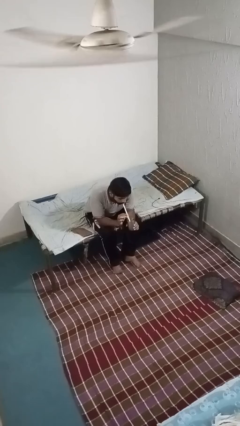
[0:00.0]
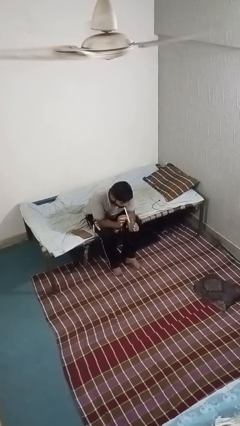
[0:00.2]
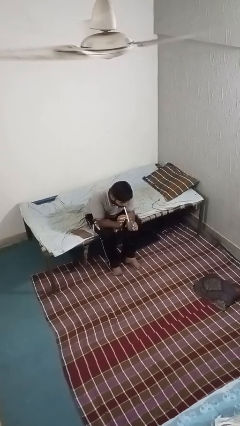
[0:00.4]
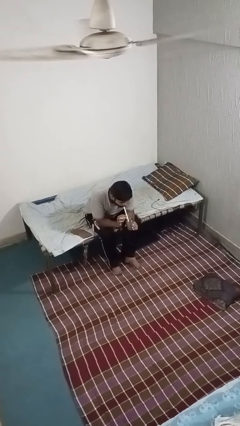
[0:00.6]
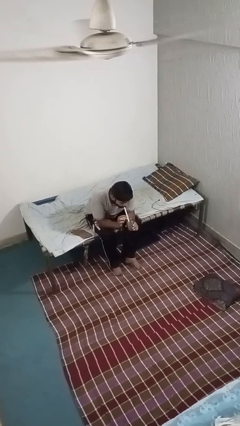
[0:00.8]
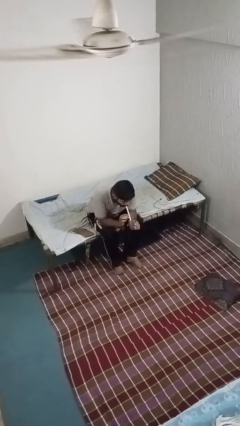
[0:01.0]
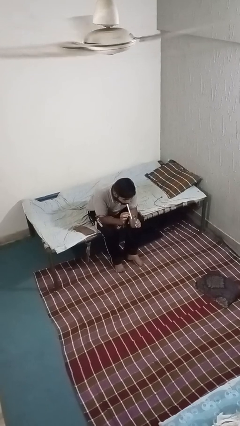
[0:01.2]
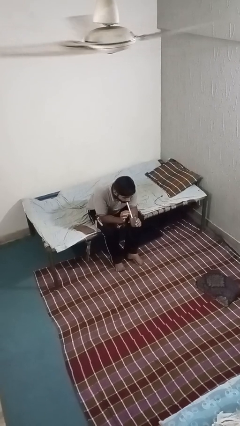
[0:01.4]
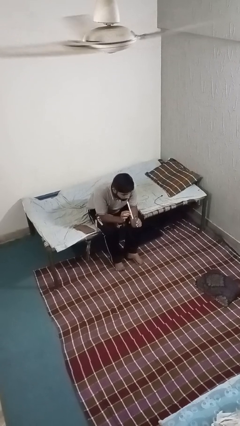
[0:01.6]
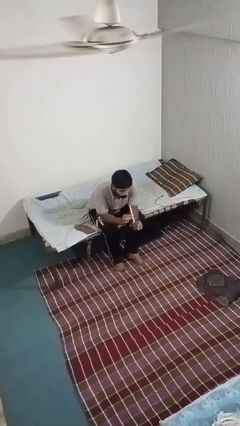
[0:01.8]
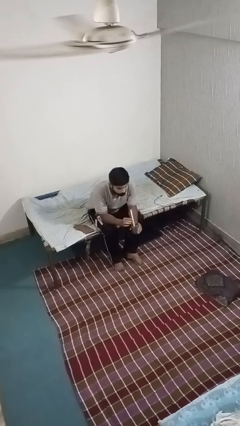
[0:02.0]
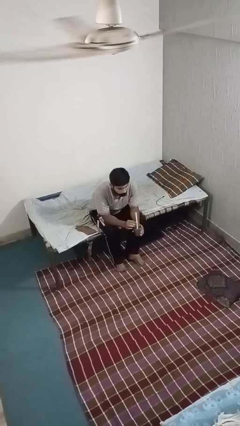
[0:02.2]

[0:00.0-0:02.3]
person drinks from straw

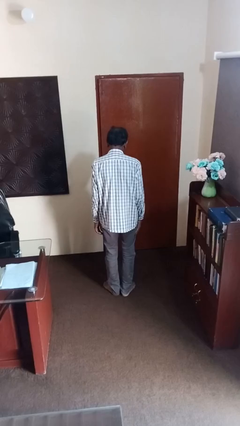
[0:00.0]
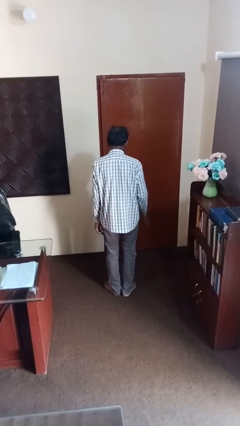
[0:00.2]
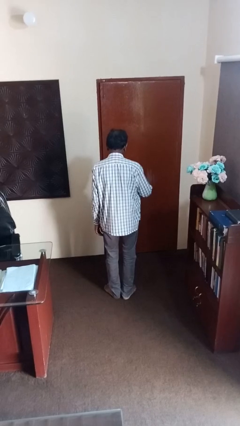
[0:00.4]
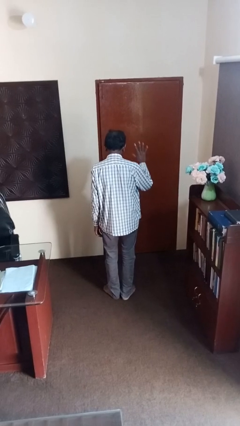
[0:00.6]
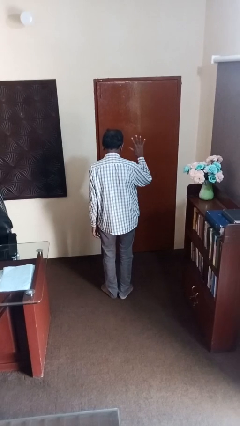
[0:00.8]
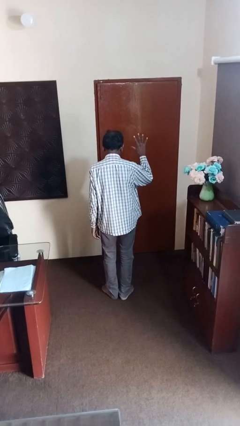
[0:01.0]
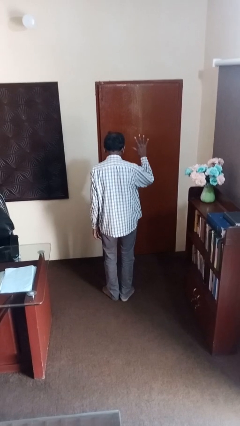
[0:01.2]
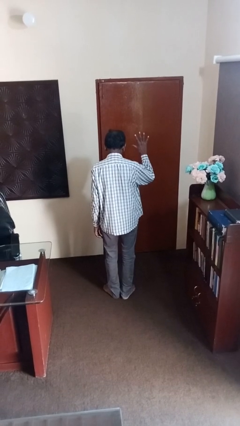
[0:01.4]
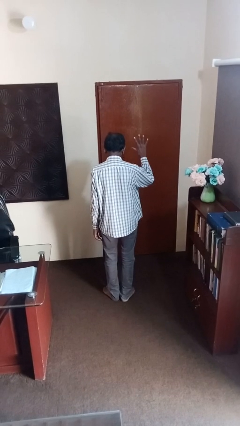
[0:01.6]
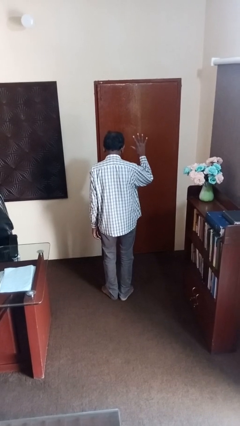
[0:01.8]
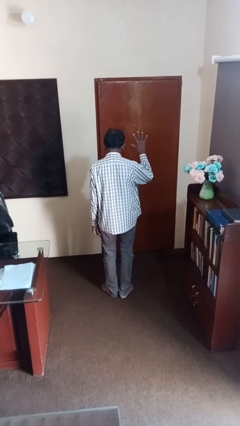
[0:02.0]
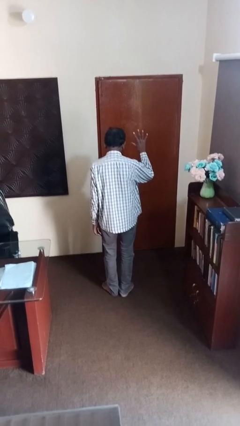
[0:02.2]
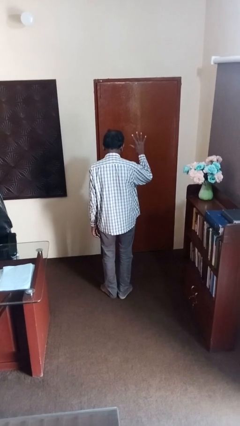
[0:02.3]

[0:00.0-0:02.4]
person gestures number five

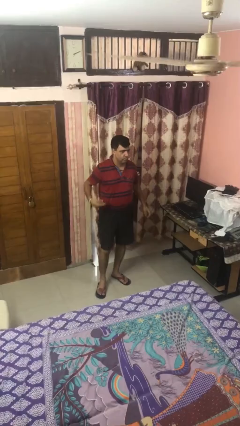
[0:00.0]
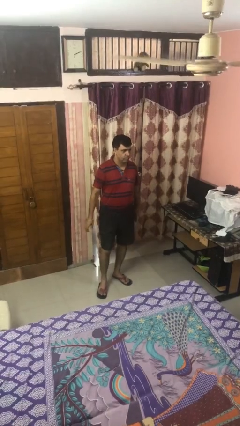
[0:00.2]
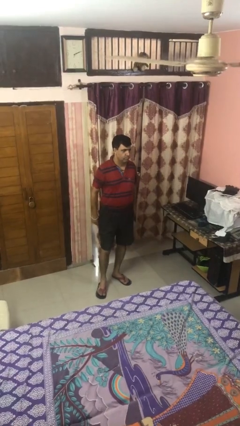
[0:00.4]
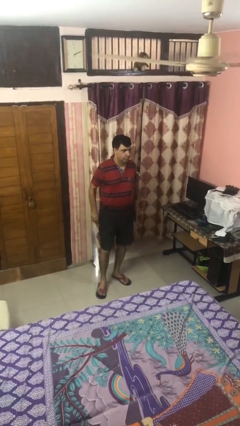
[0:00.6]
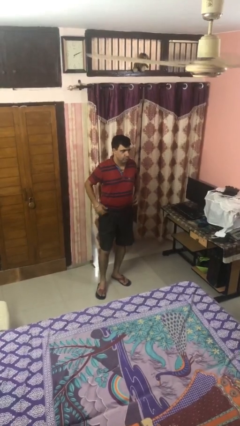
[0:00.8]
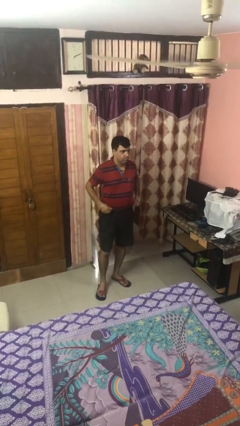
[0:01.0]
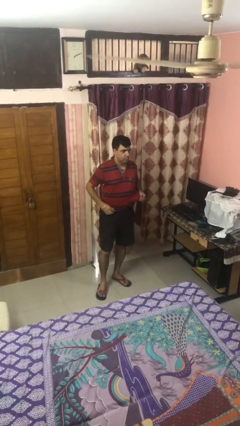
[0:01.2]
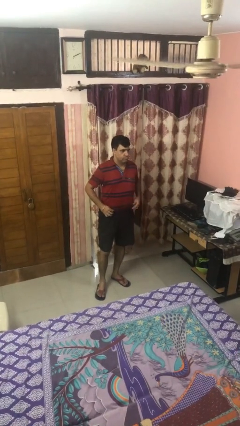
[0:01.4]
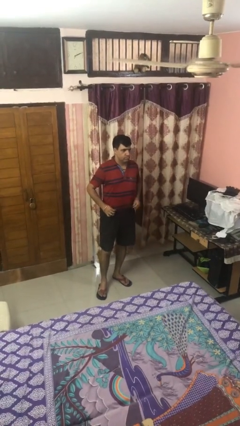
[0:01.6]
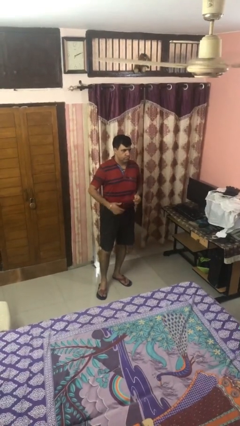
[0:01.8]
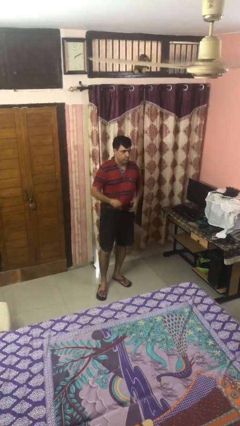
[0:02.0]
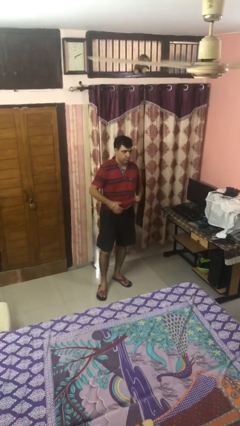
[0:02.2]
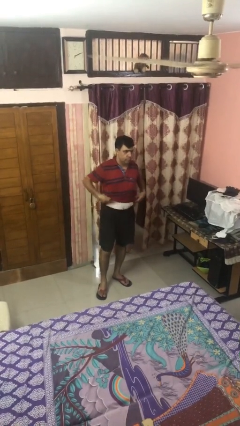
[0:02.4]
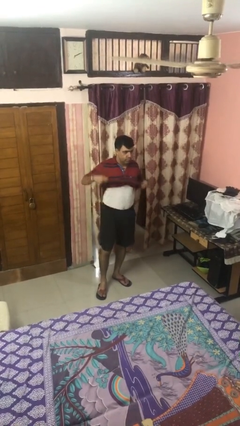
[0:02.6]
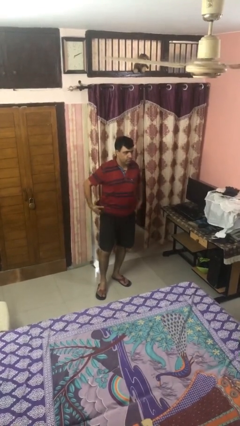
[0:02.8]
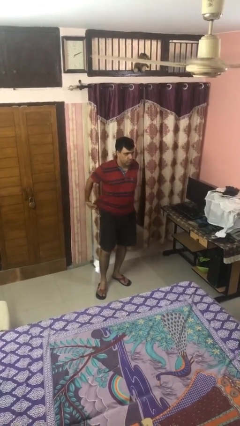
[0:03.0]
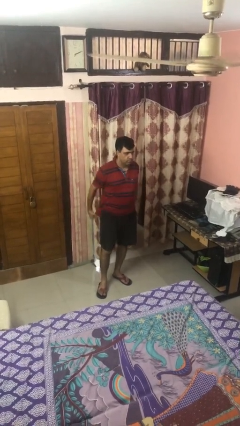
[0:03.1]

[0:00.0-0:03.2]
person untucks shirt

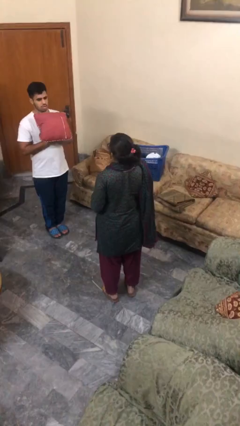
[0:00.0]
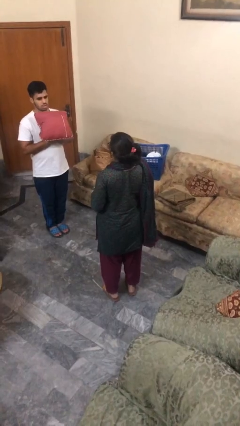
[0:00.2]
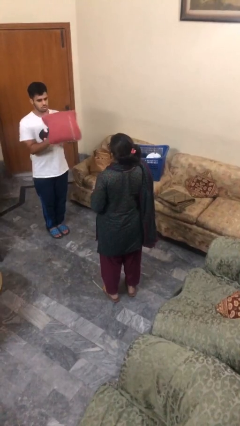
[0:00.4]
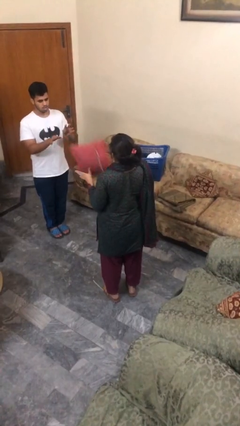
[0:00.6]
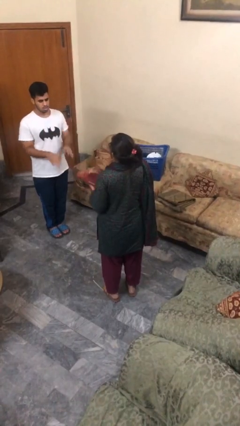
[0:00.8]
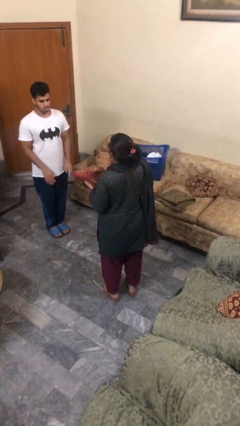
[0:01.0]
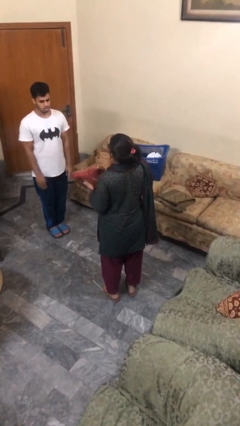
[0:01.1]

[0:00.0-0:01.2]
person catches object from person

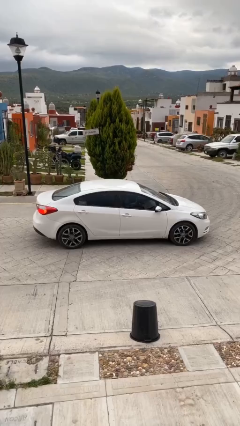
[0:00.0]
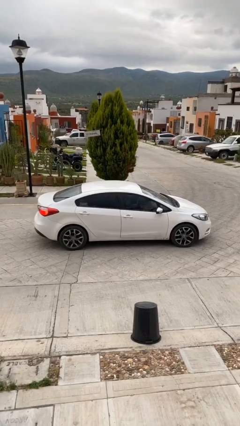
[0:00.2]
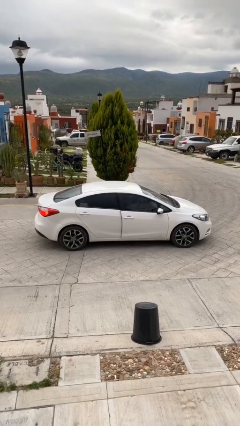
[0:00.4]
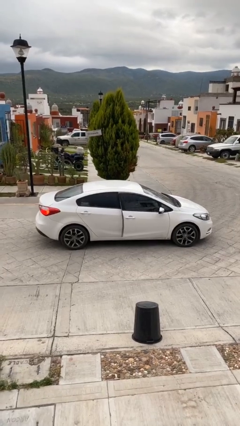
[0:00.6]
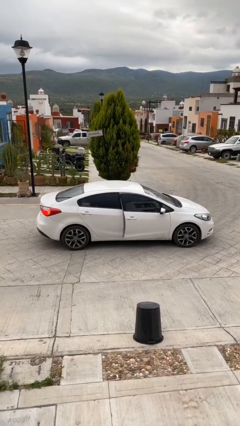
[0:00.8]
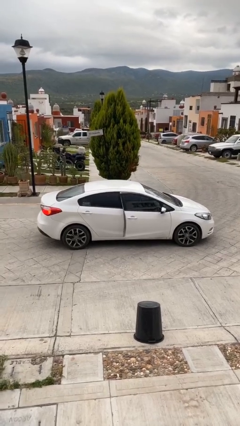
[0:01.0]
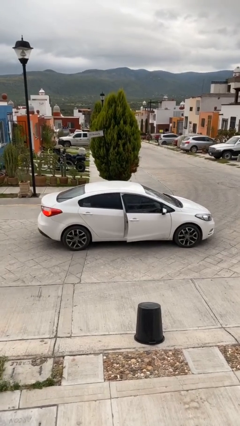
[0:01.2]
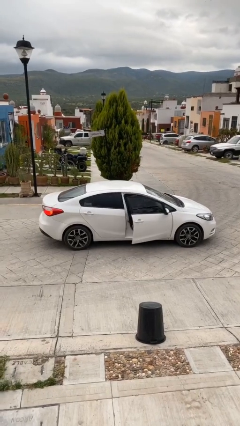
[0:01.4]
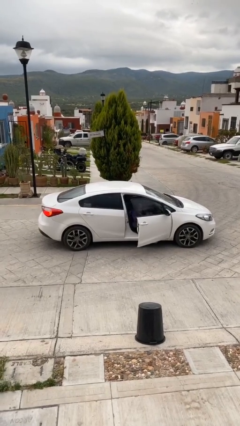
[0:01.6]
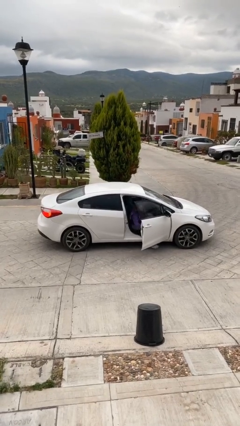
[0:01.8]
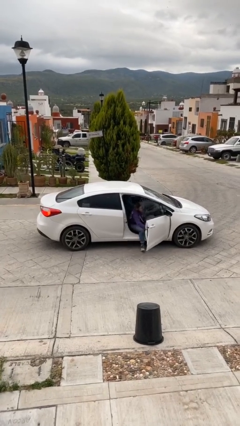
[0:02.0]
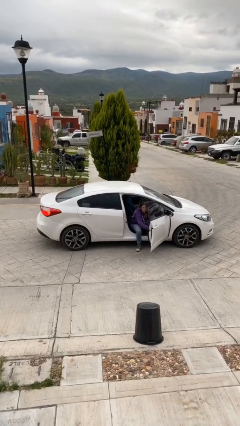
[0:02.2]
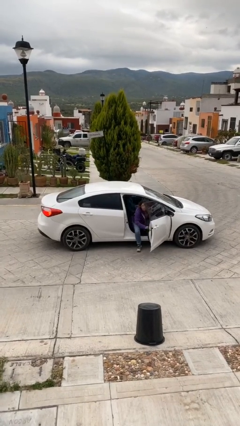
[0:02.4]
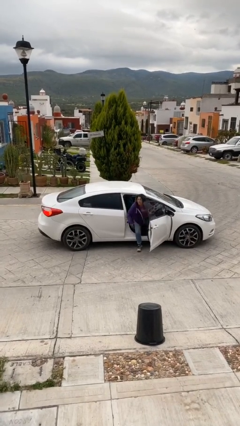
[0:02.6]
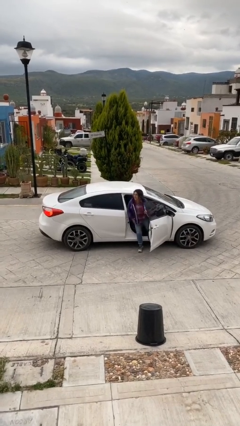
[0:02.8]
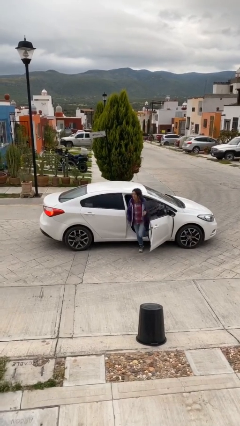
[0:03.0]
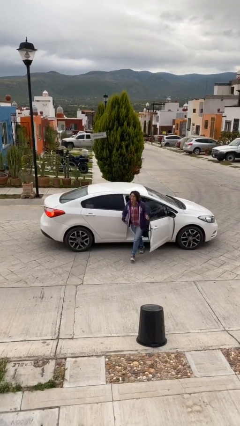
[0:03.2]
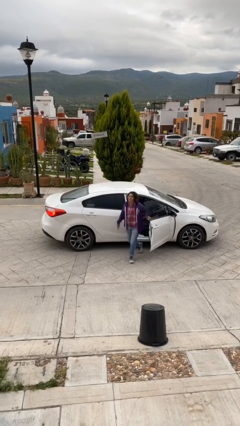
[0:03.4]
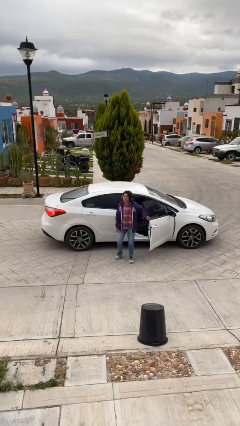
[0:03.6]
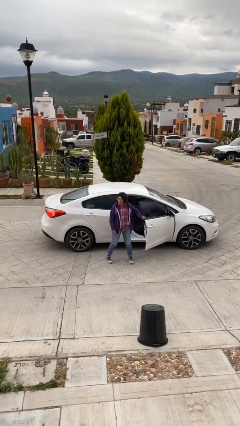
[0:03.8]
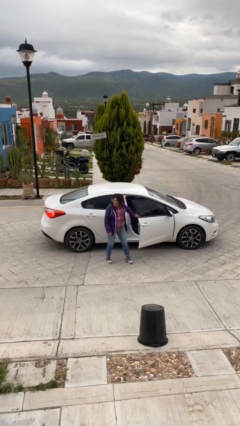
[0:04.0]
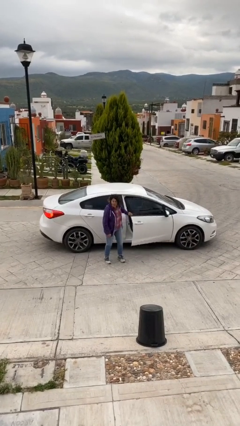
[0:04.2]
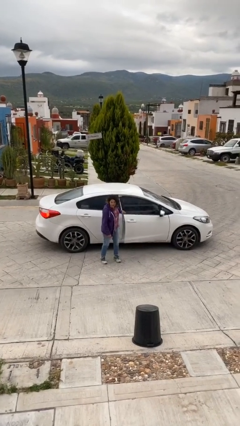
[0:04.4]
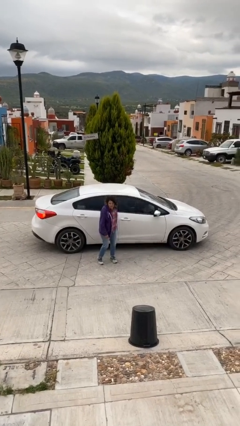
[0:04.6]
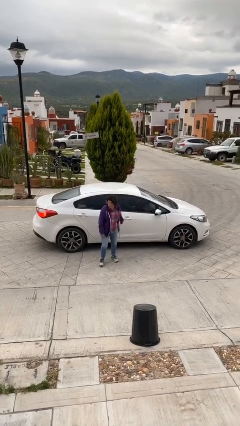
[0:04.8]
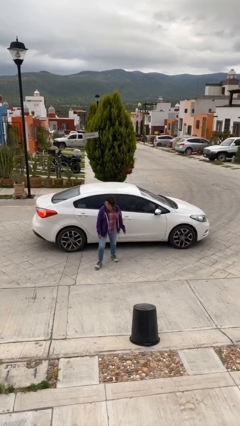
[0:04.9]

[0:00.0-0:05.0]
car drops off person

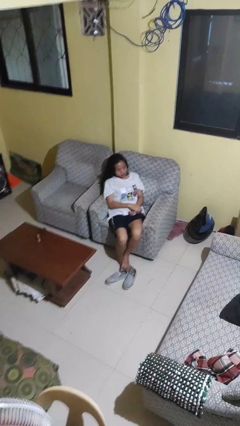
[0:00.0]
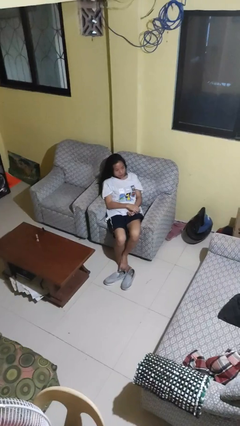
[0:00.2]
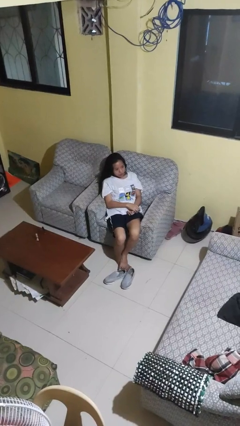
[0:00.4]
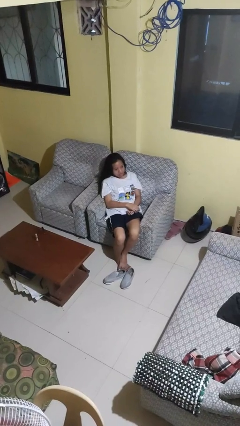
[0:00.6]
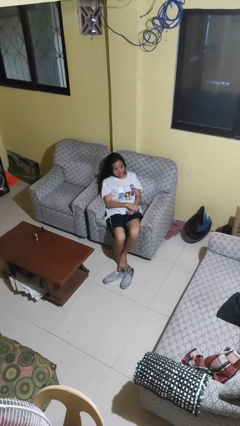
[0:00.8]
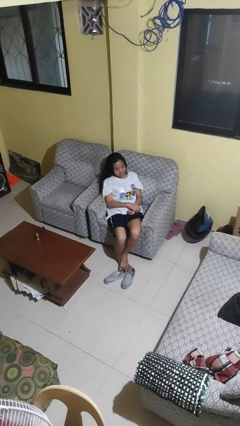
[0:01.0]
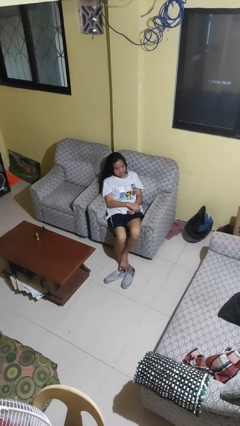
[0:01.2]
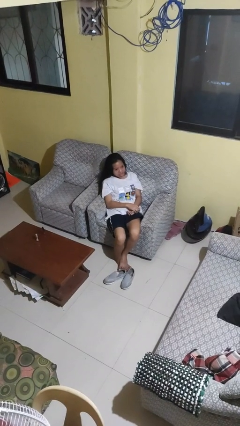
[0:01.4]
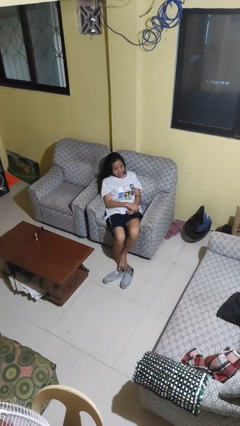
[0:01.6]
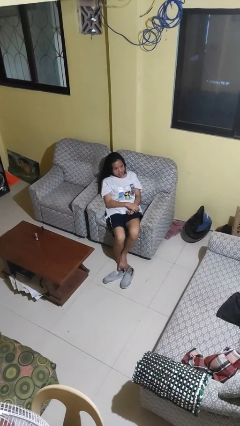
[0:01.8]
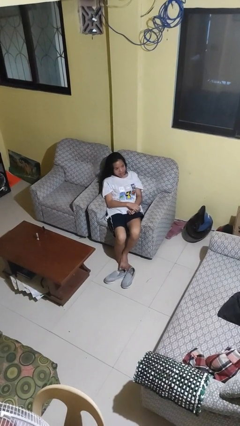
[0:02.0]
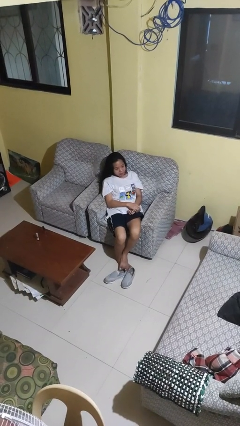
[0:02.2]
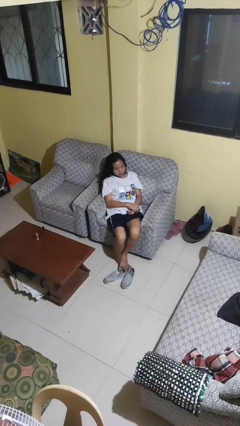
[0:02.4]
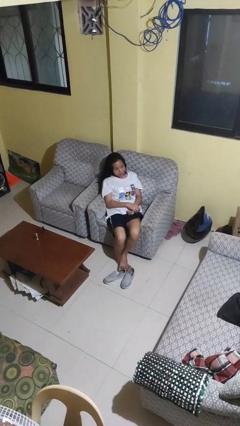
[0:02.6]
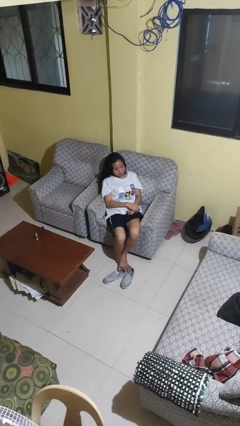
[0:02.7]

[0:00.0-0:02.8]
person sticks out tongue

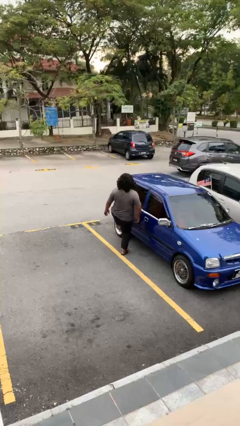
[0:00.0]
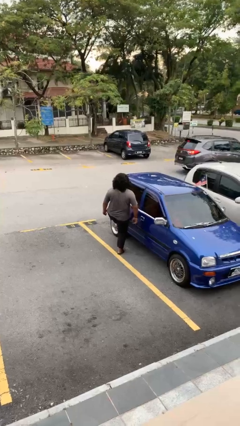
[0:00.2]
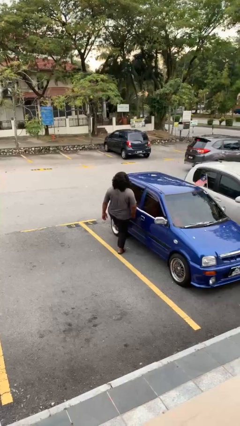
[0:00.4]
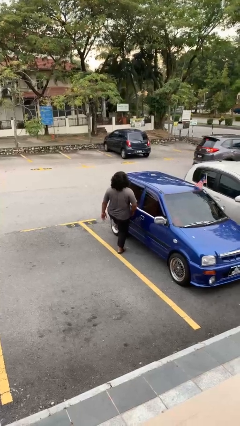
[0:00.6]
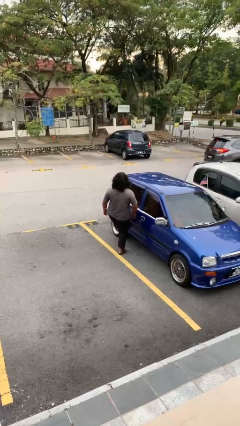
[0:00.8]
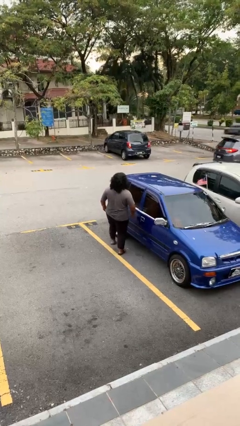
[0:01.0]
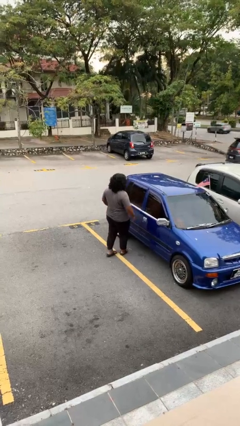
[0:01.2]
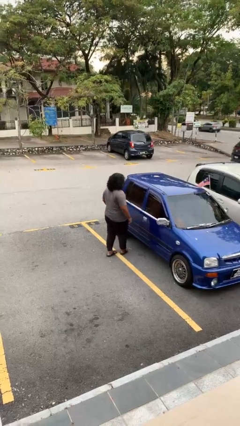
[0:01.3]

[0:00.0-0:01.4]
person kicks car tires
